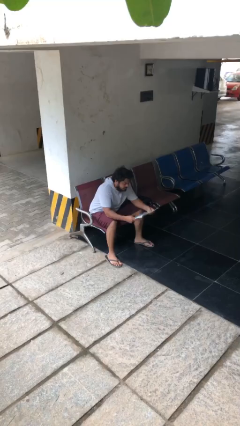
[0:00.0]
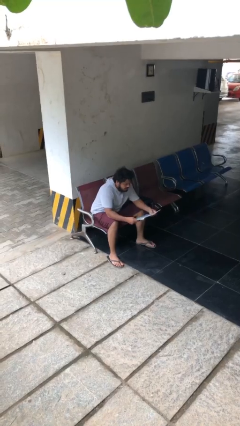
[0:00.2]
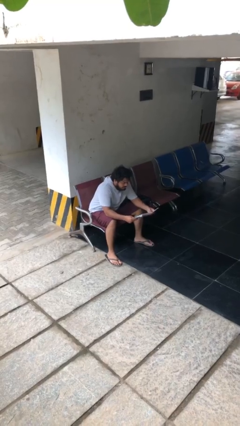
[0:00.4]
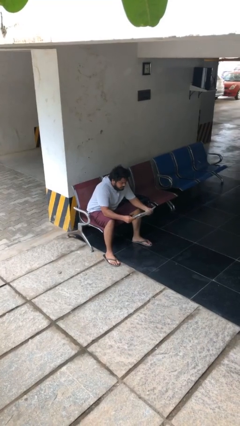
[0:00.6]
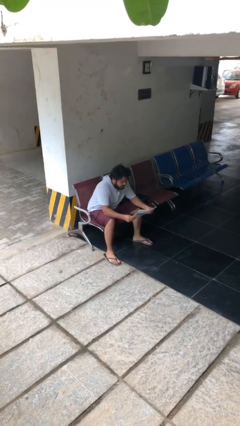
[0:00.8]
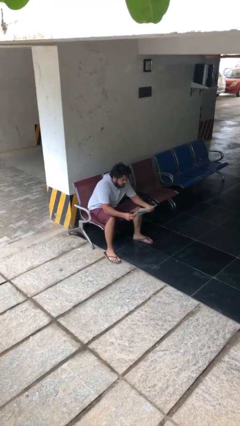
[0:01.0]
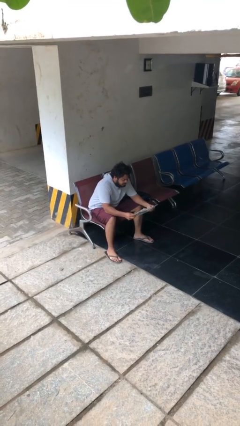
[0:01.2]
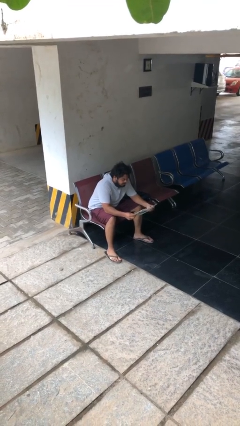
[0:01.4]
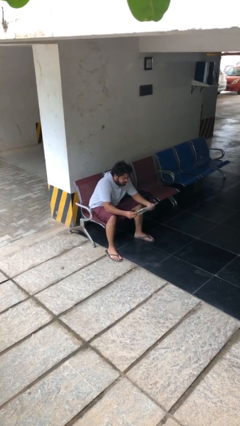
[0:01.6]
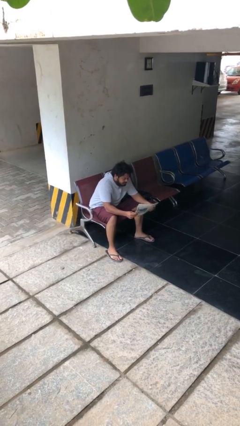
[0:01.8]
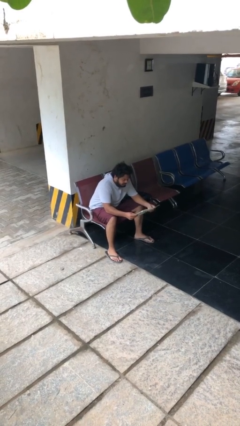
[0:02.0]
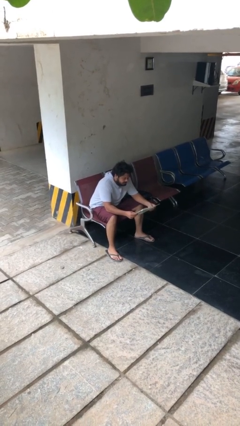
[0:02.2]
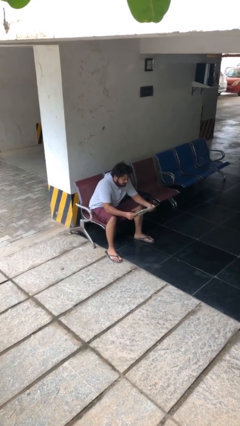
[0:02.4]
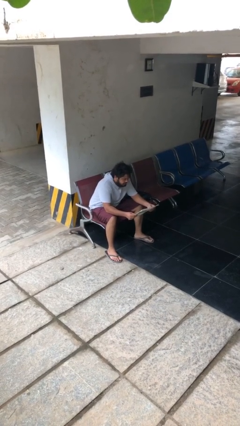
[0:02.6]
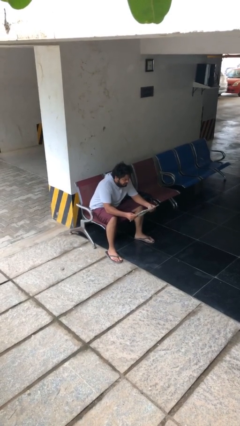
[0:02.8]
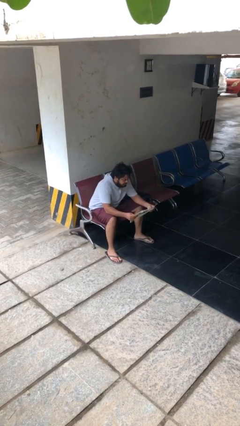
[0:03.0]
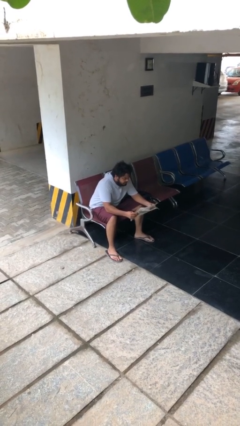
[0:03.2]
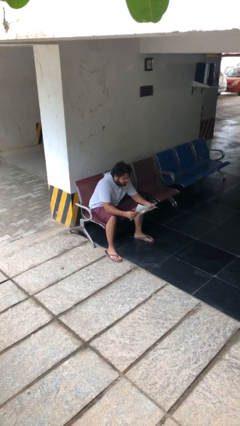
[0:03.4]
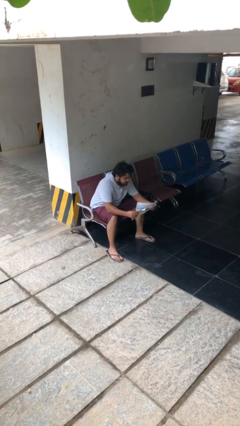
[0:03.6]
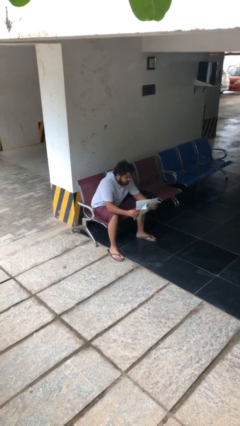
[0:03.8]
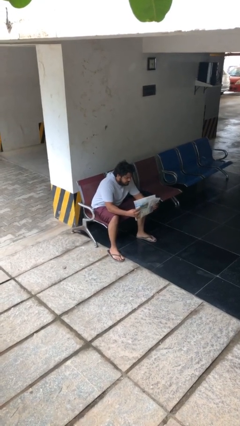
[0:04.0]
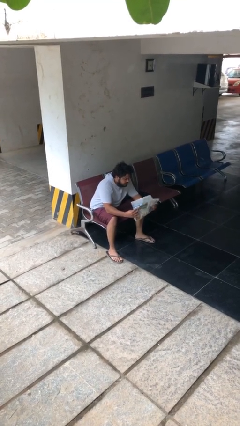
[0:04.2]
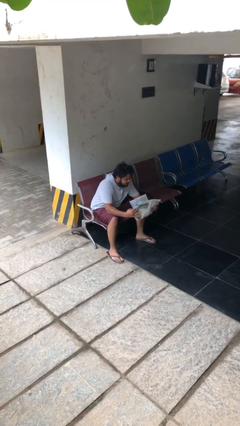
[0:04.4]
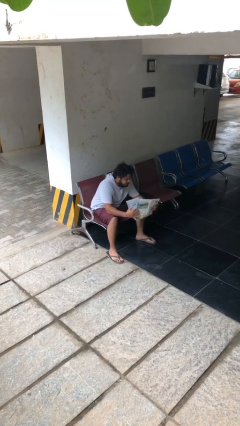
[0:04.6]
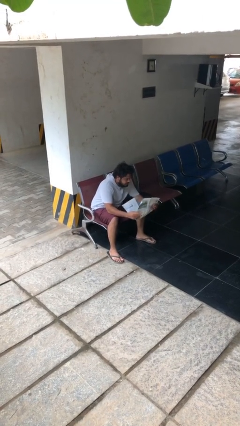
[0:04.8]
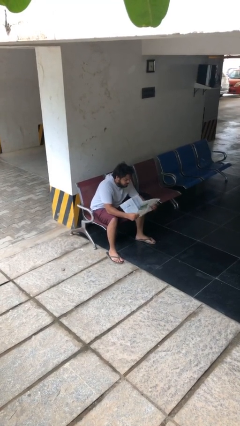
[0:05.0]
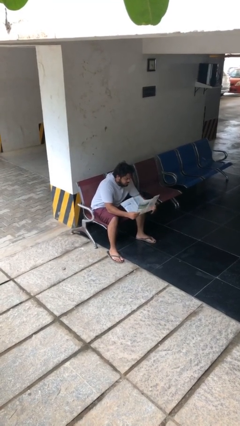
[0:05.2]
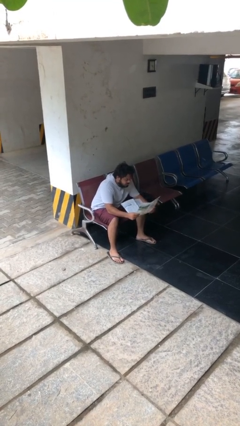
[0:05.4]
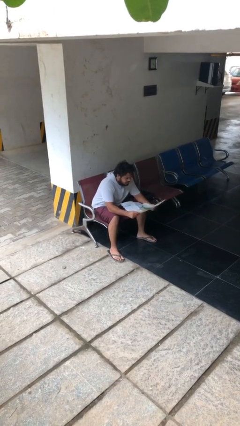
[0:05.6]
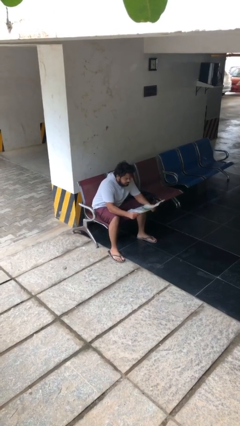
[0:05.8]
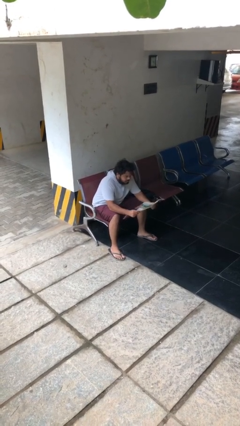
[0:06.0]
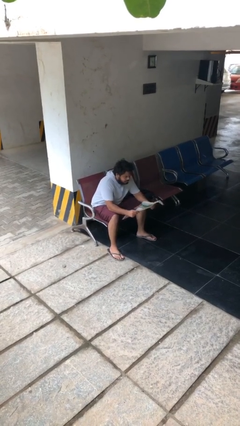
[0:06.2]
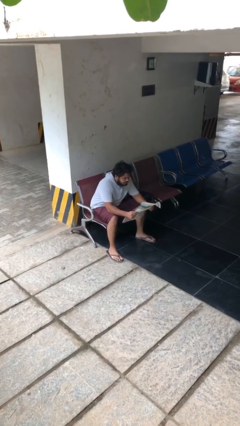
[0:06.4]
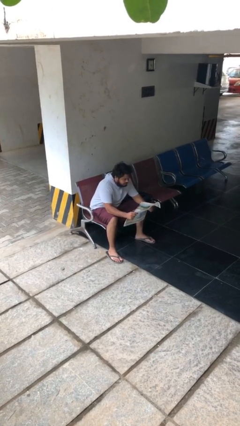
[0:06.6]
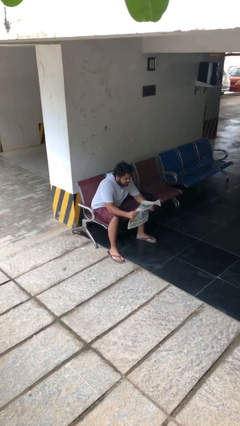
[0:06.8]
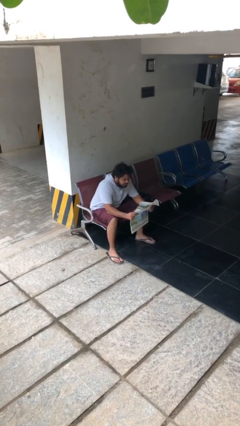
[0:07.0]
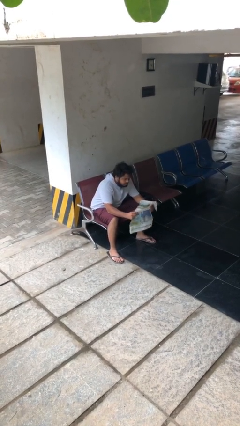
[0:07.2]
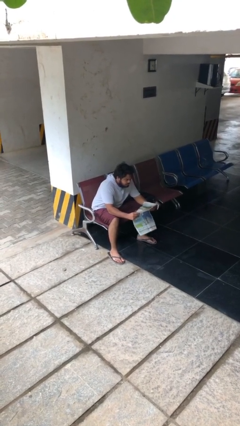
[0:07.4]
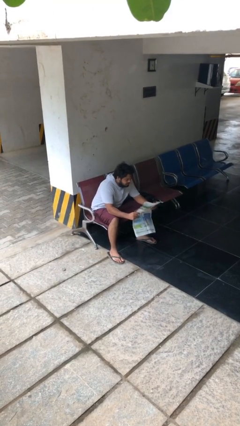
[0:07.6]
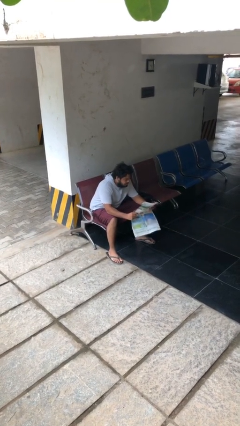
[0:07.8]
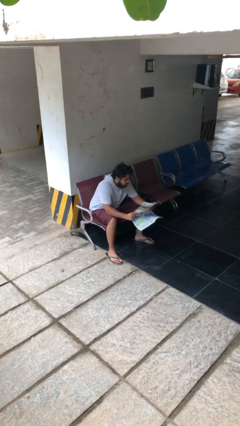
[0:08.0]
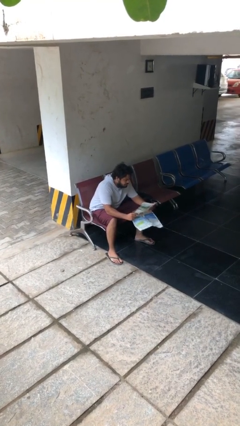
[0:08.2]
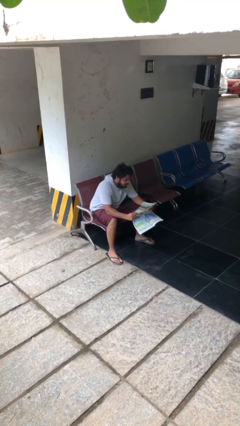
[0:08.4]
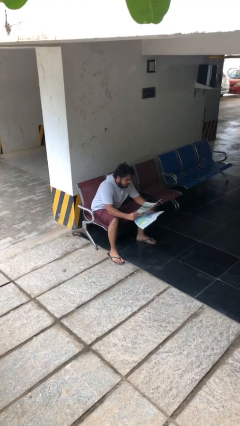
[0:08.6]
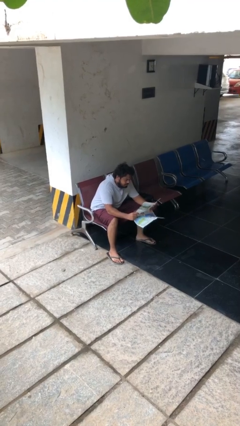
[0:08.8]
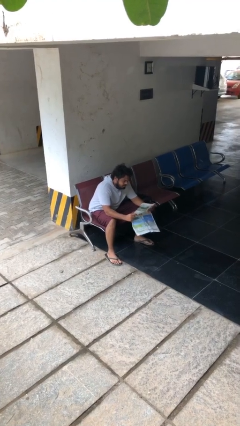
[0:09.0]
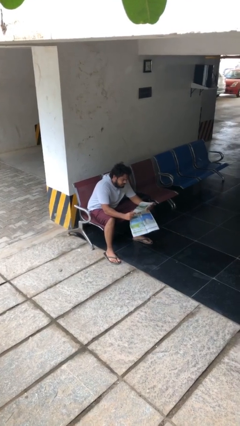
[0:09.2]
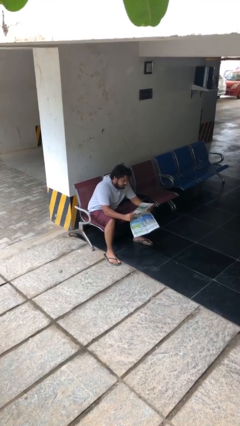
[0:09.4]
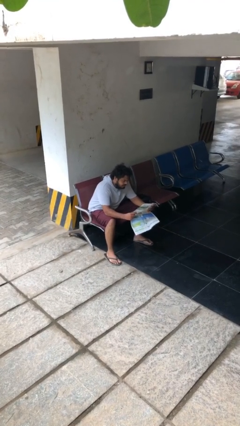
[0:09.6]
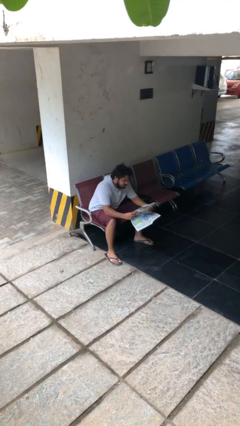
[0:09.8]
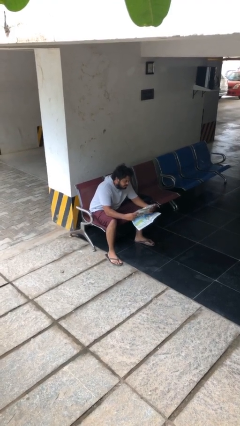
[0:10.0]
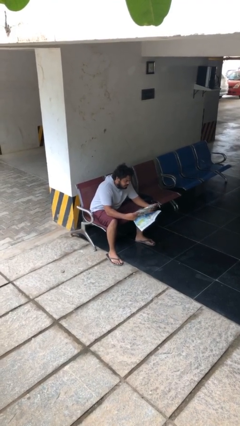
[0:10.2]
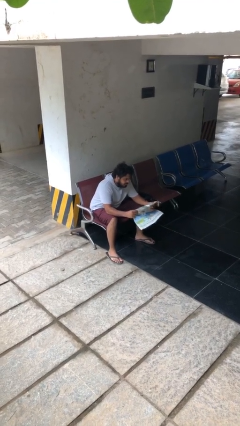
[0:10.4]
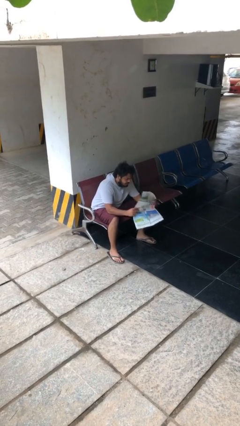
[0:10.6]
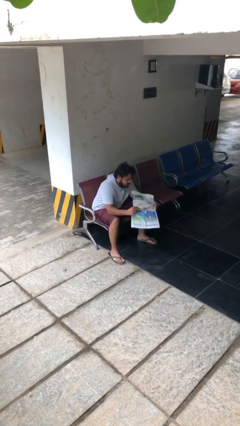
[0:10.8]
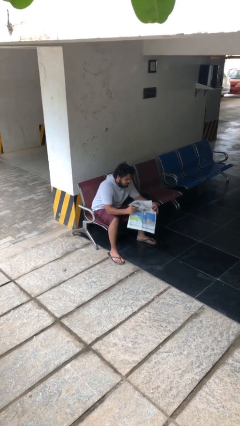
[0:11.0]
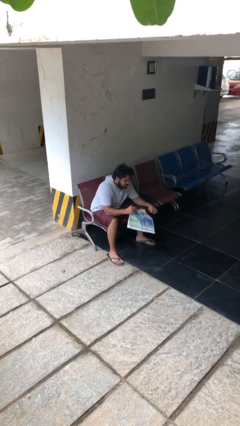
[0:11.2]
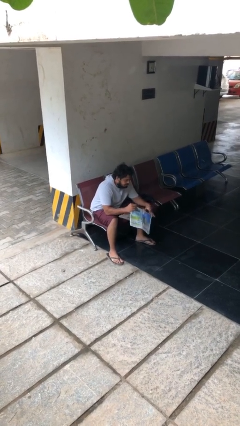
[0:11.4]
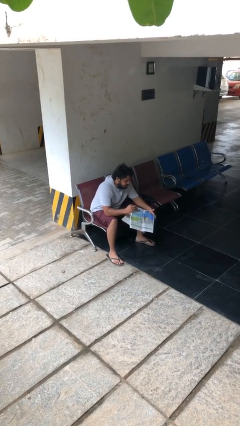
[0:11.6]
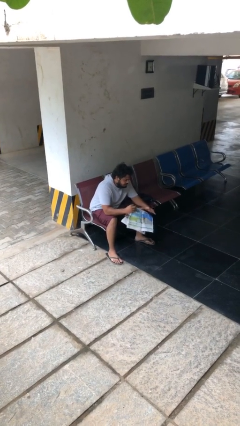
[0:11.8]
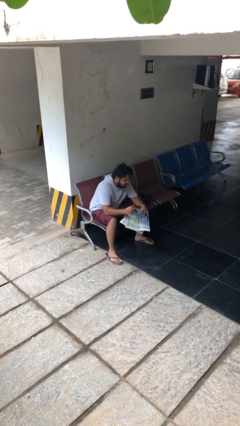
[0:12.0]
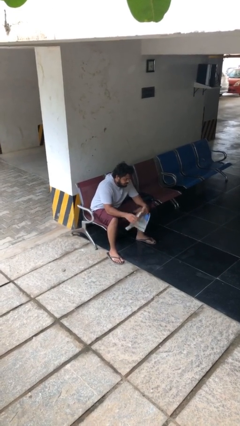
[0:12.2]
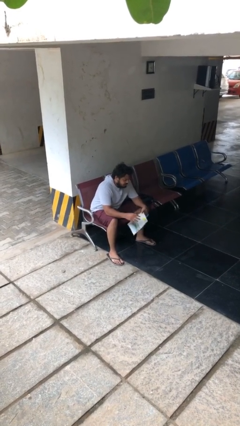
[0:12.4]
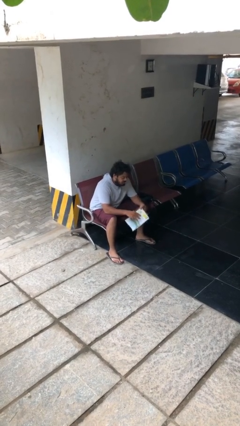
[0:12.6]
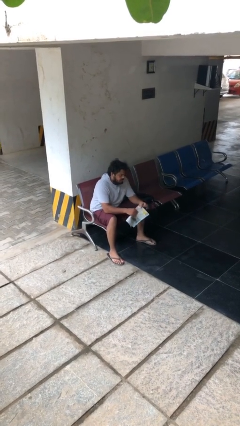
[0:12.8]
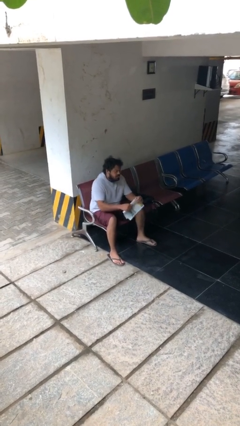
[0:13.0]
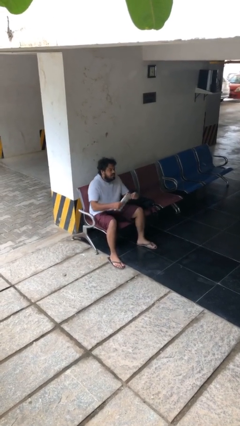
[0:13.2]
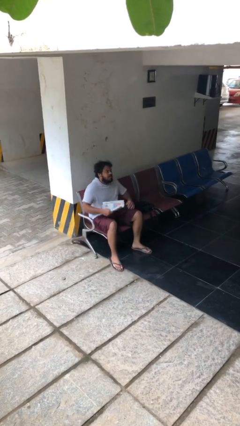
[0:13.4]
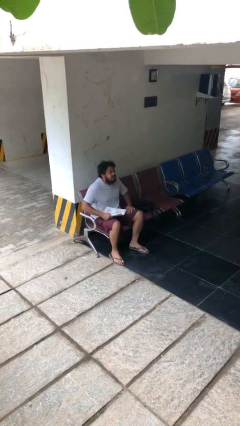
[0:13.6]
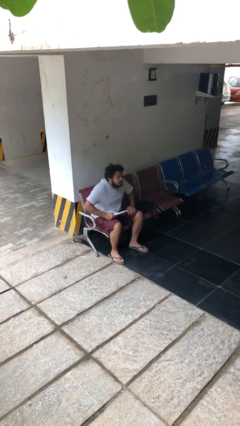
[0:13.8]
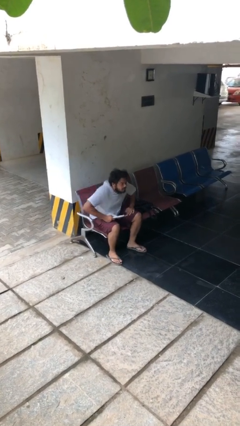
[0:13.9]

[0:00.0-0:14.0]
person reads document

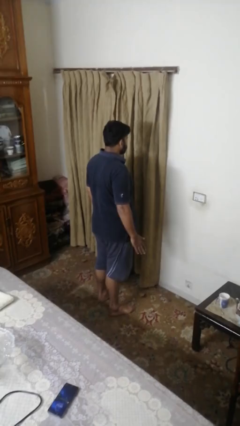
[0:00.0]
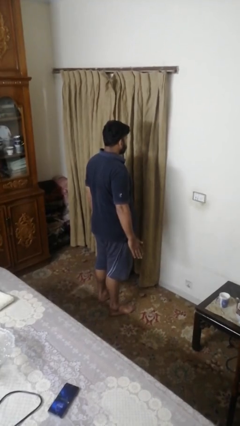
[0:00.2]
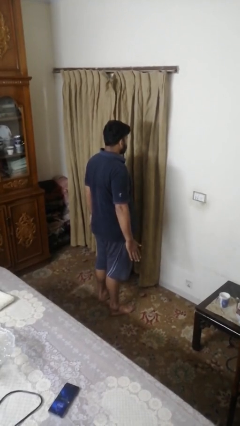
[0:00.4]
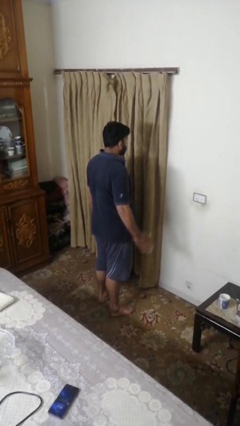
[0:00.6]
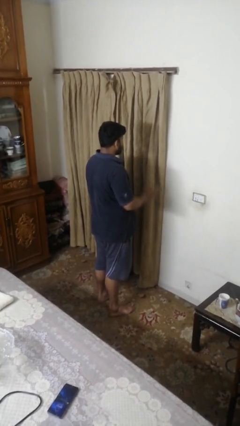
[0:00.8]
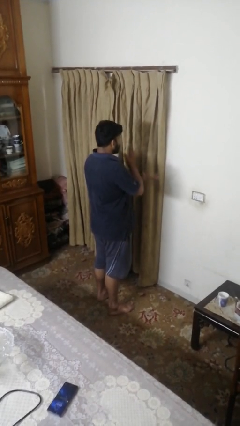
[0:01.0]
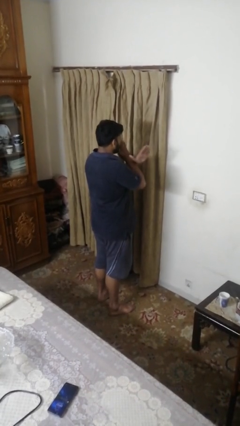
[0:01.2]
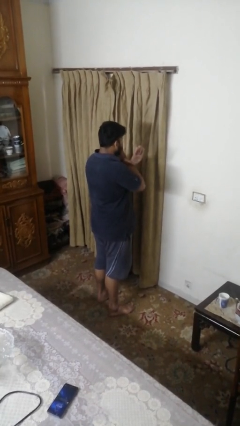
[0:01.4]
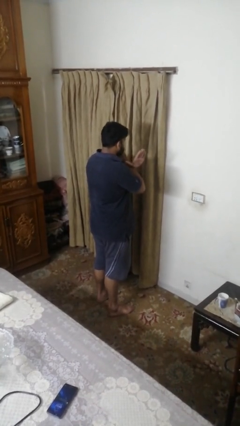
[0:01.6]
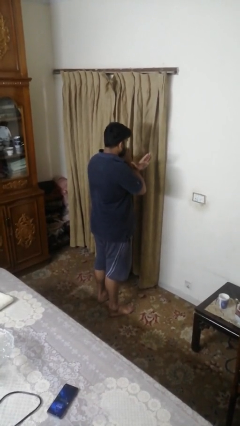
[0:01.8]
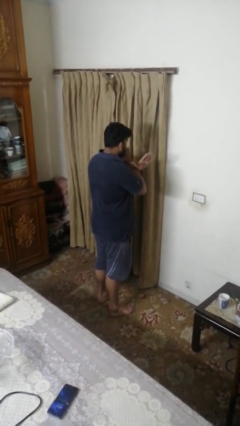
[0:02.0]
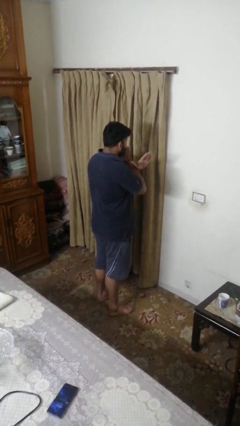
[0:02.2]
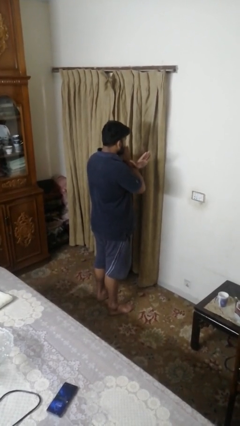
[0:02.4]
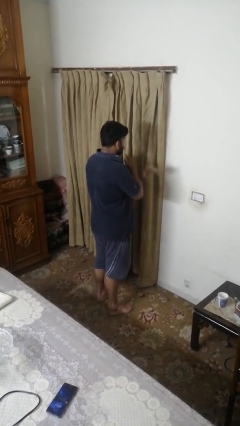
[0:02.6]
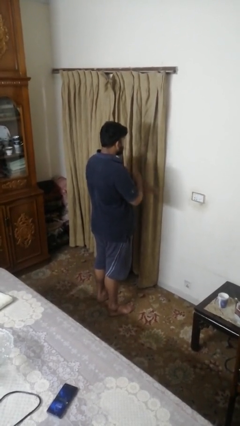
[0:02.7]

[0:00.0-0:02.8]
person gestures arms x

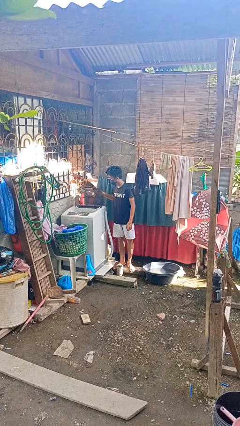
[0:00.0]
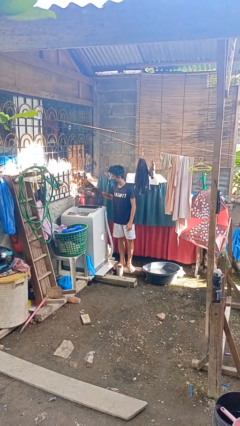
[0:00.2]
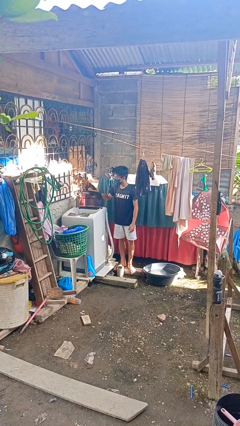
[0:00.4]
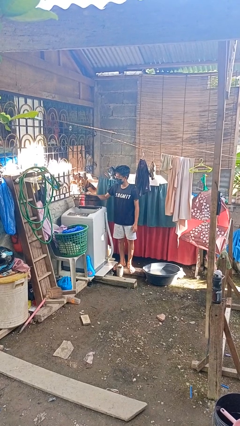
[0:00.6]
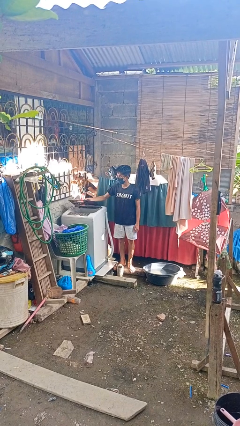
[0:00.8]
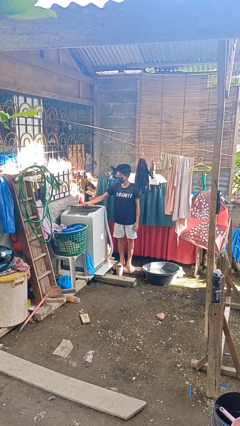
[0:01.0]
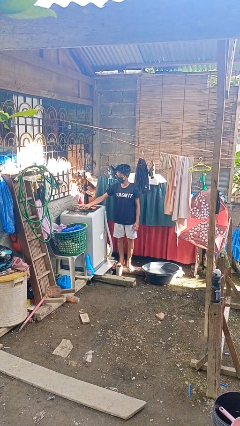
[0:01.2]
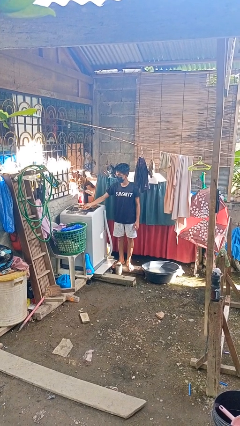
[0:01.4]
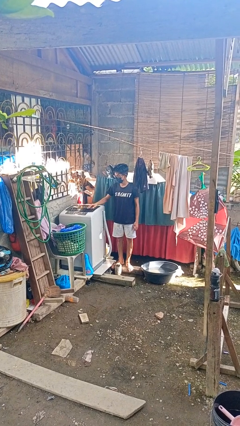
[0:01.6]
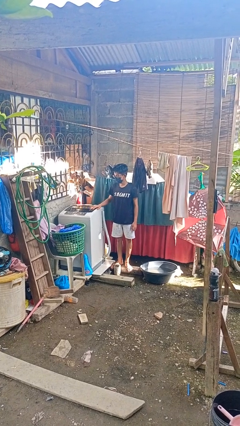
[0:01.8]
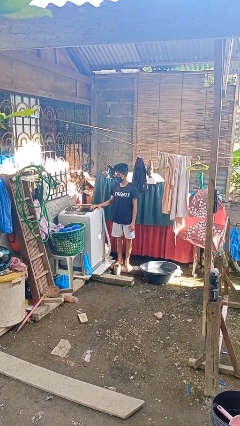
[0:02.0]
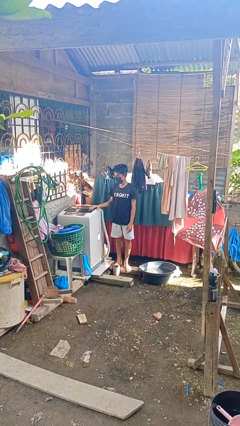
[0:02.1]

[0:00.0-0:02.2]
person closes clothes washer
